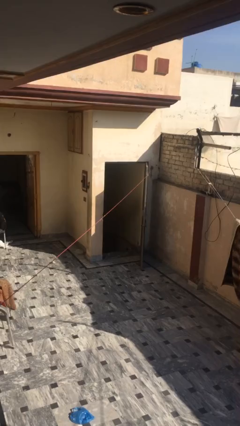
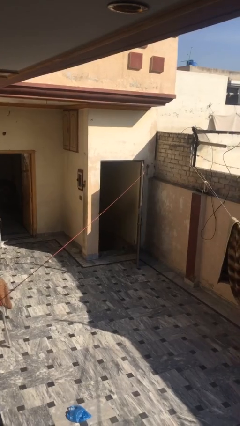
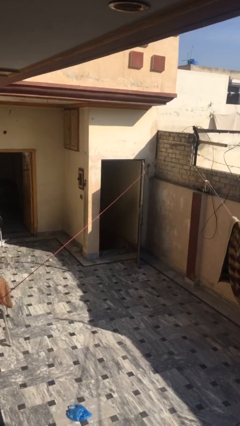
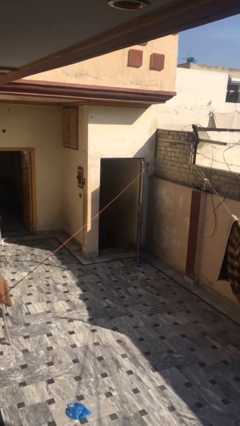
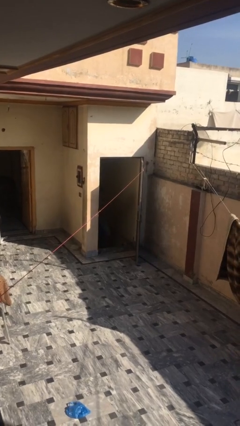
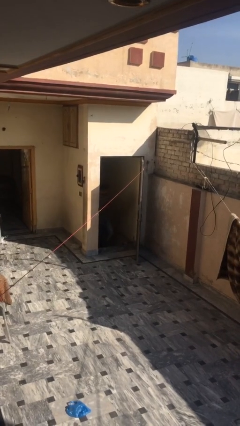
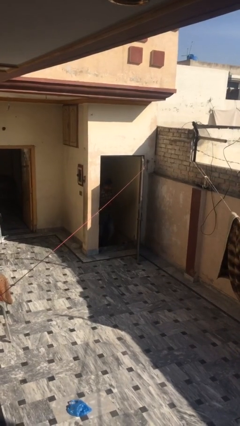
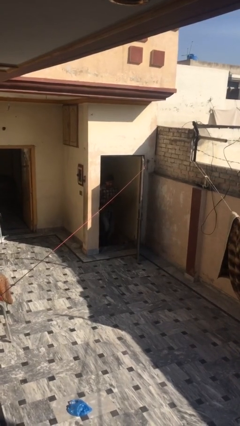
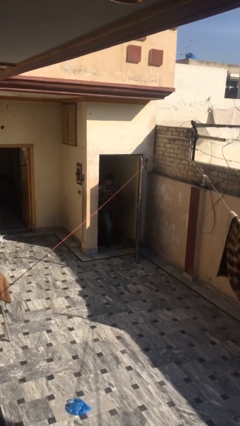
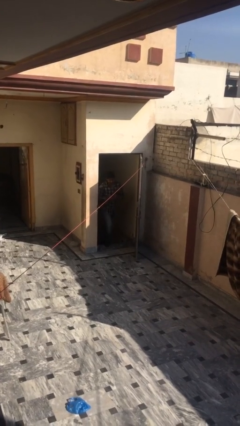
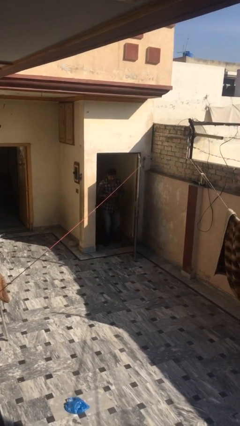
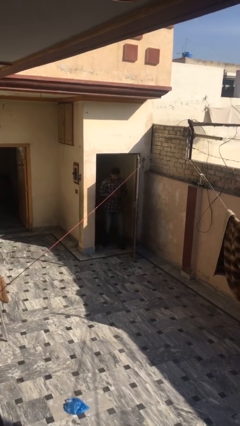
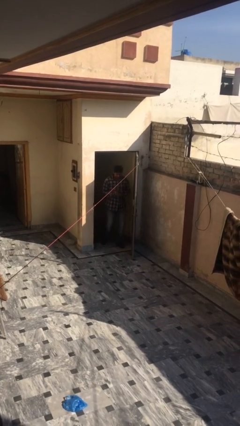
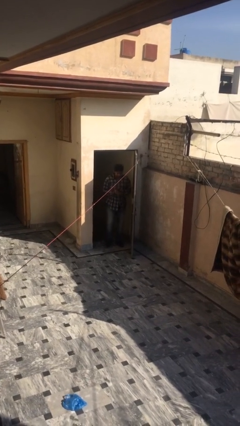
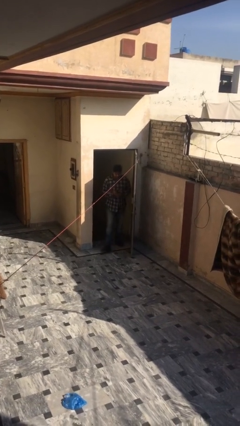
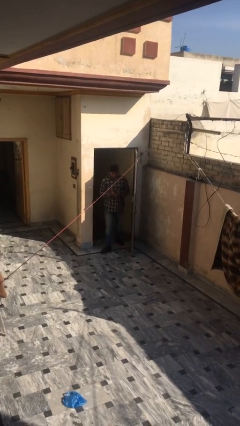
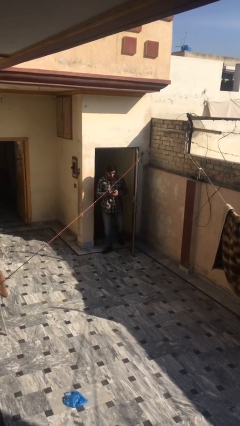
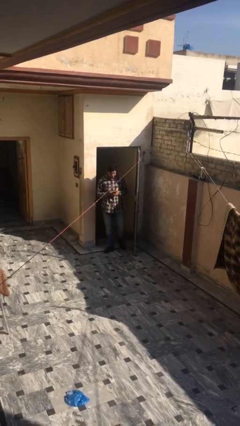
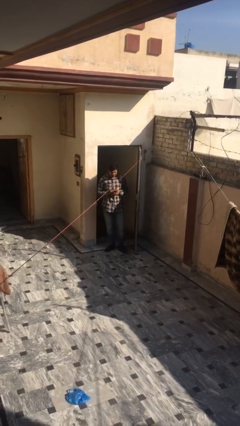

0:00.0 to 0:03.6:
person enters scene through structure

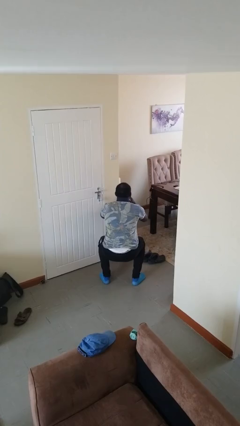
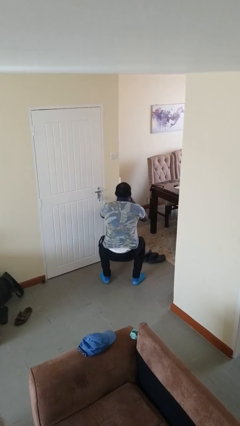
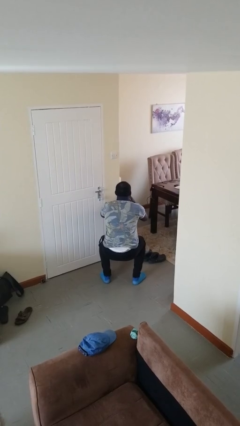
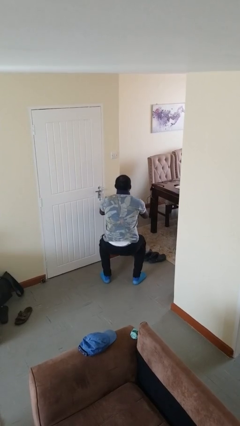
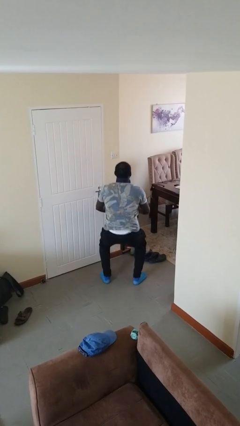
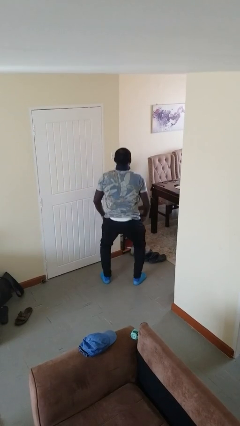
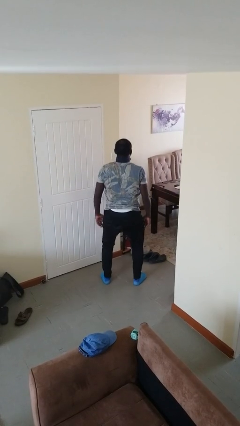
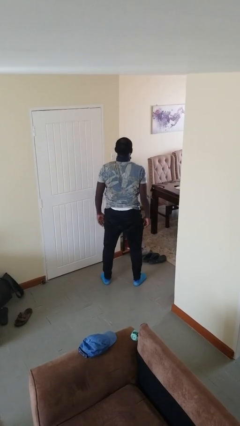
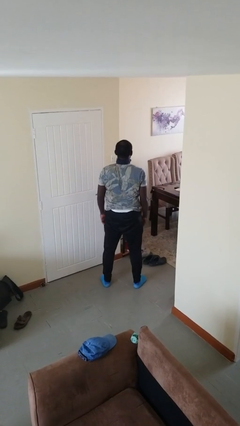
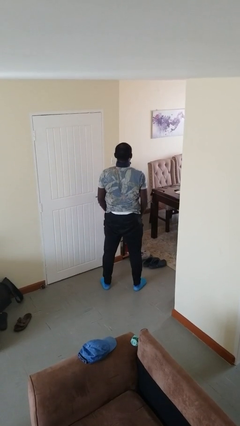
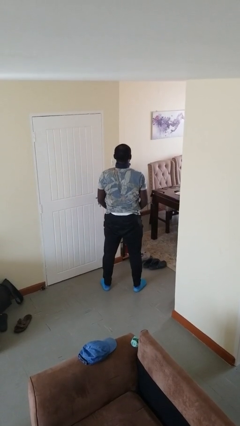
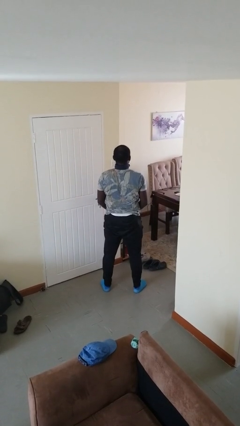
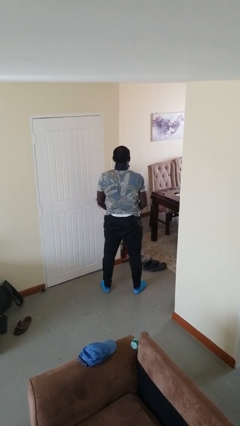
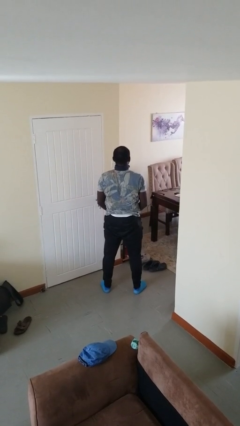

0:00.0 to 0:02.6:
person stands up

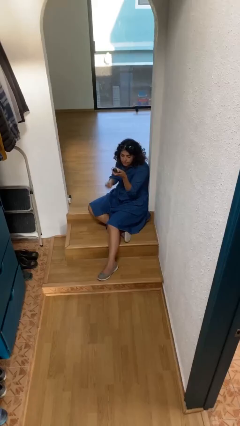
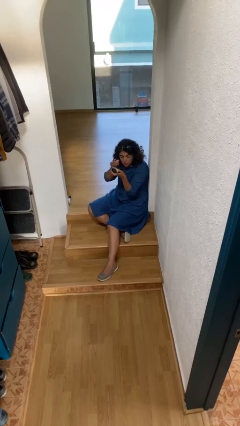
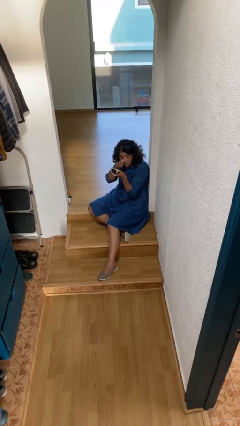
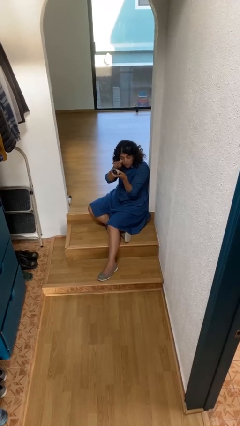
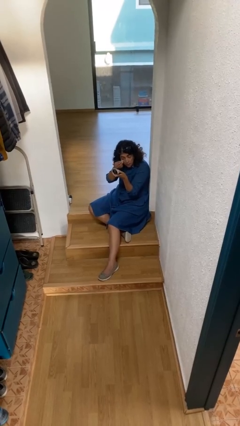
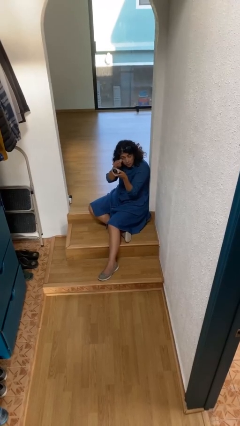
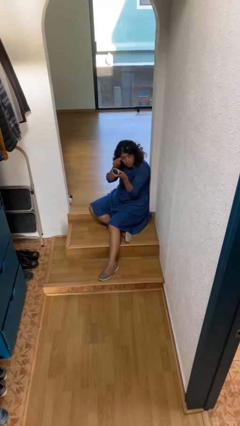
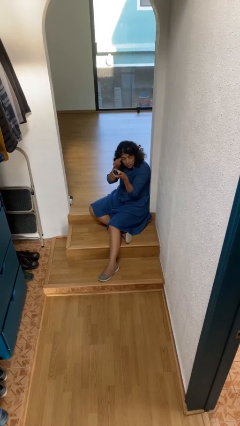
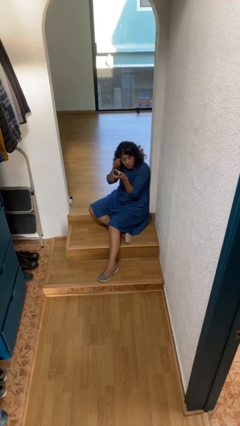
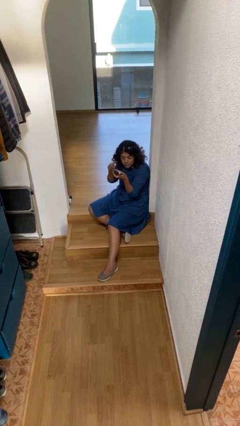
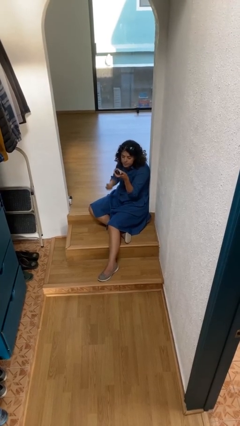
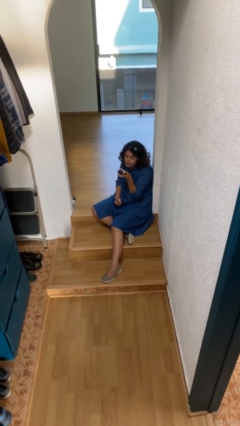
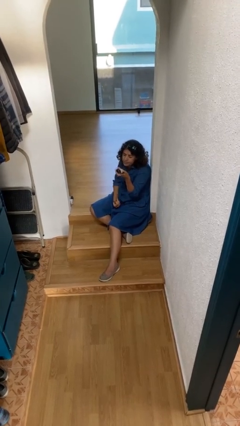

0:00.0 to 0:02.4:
person applies foundation makeup

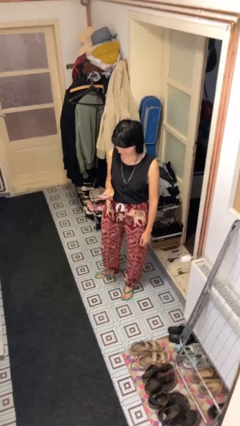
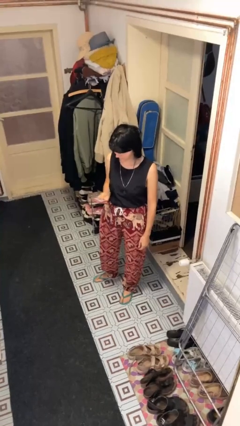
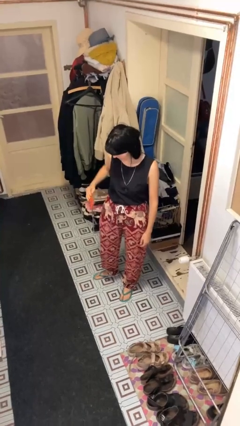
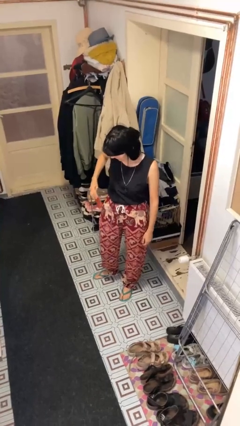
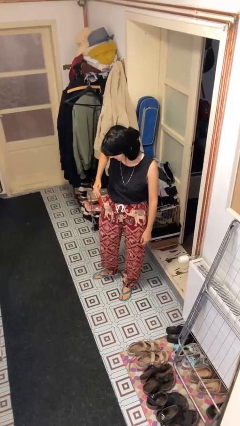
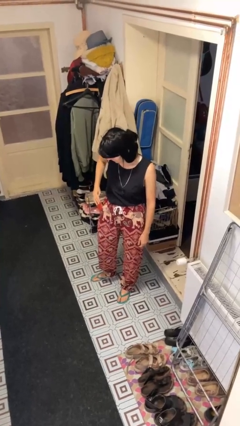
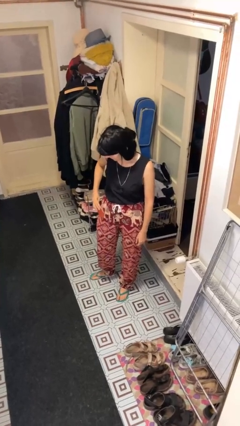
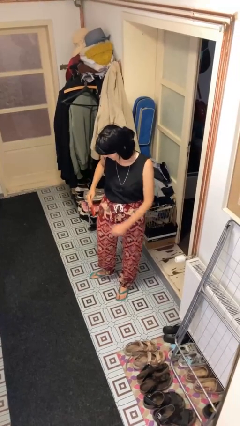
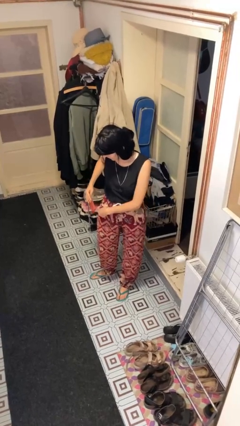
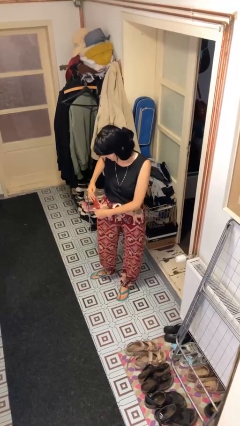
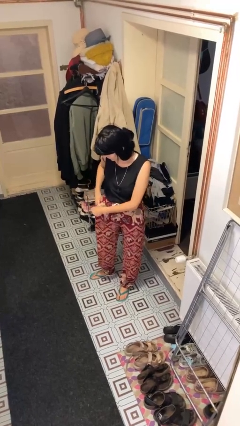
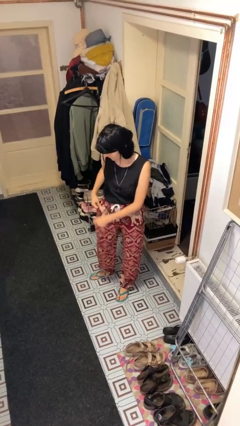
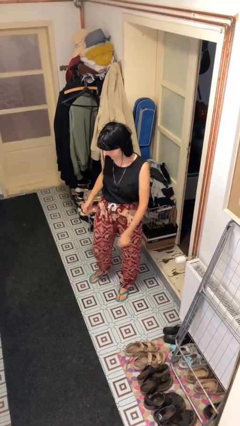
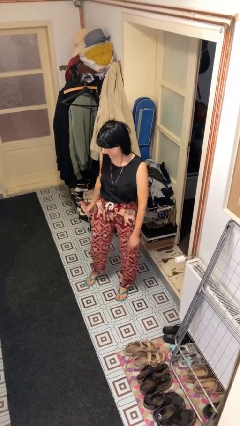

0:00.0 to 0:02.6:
person puts phone into pocket

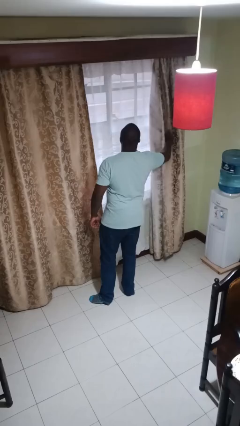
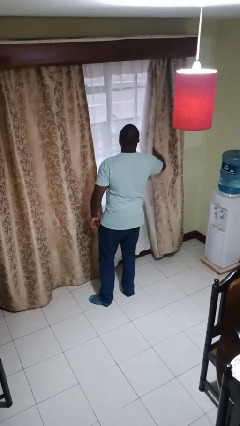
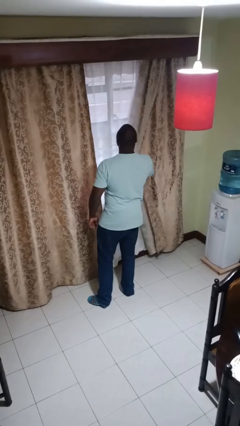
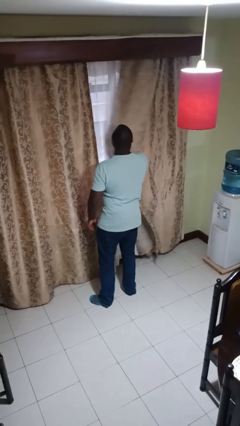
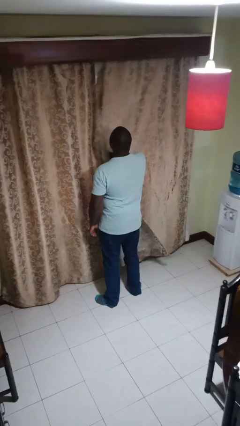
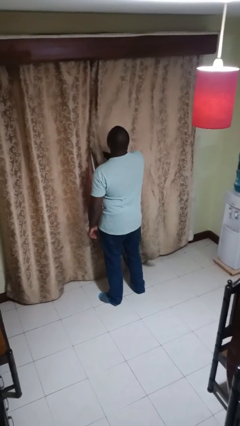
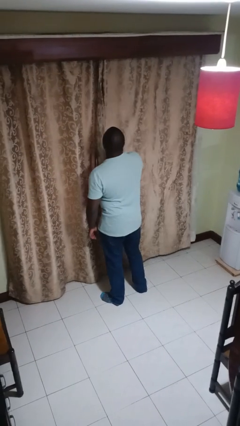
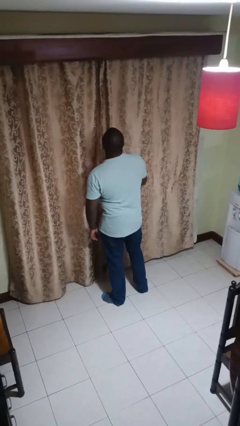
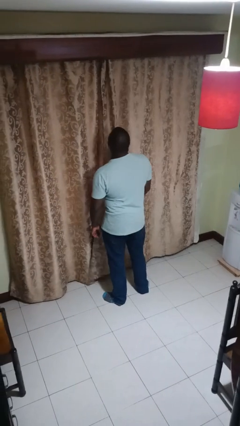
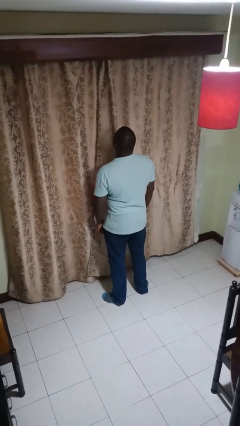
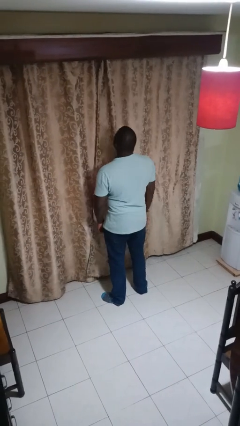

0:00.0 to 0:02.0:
person closes curtains

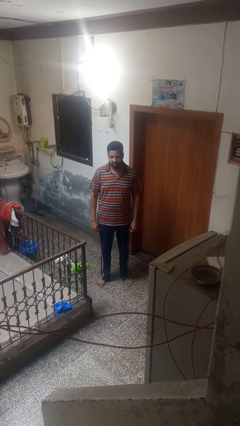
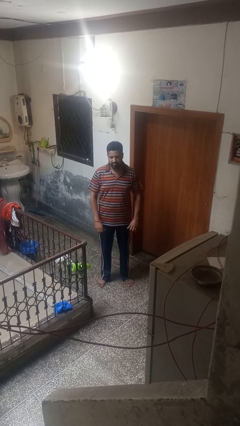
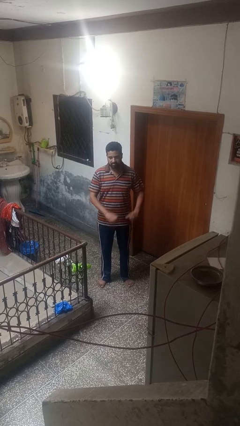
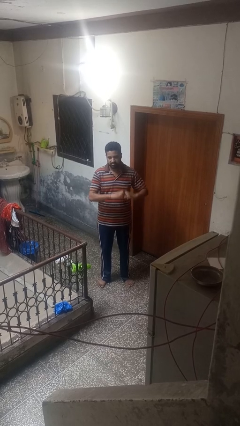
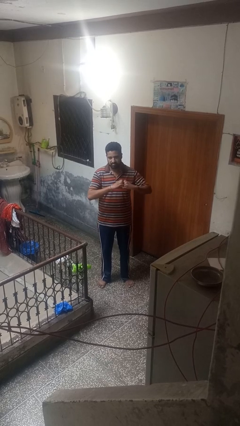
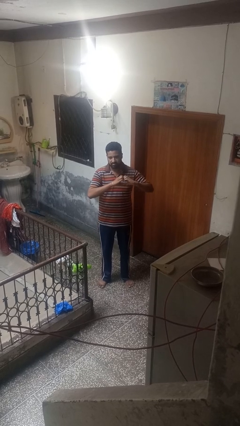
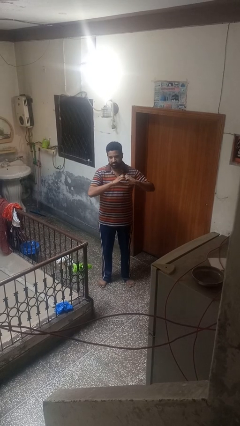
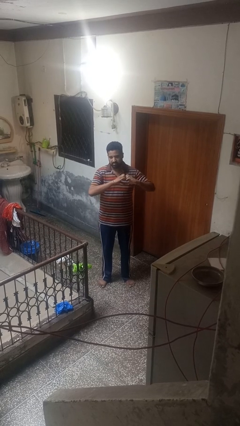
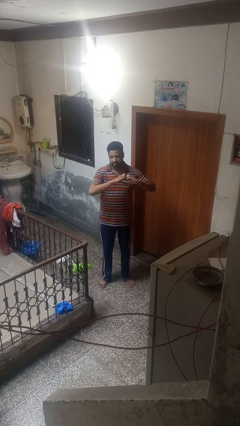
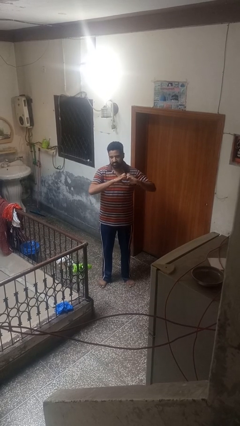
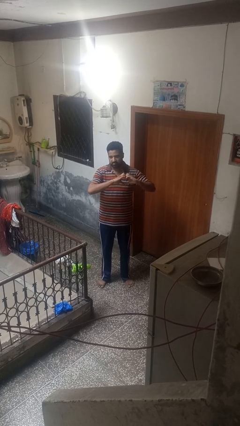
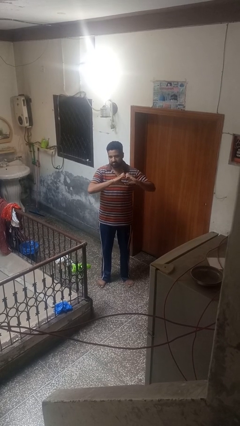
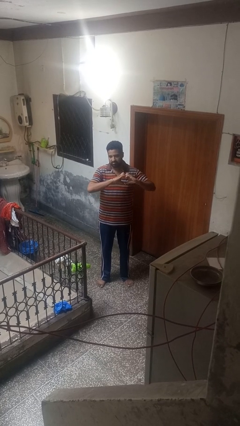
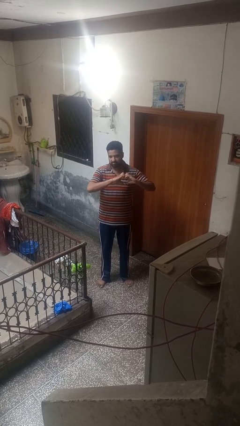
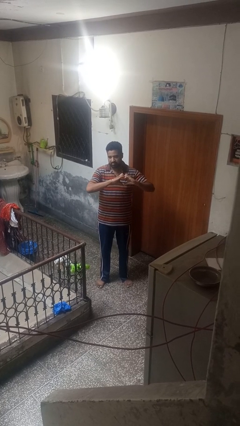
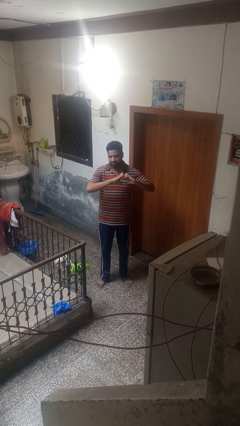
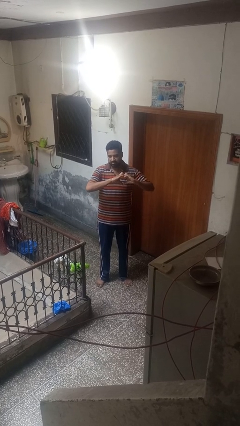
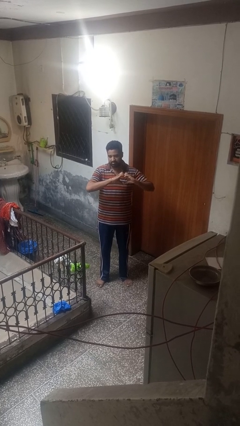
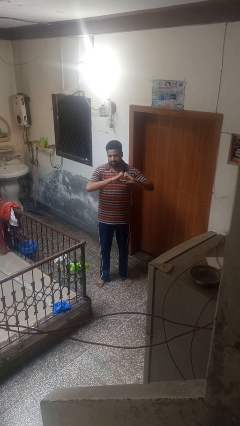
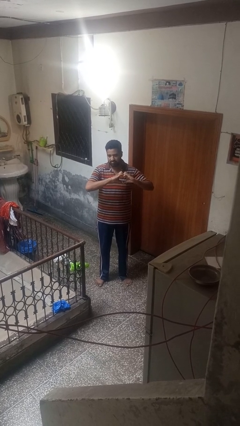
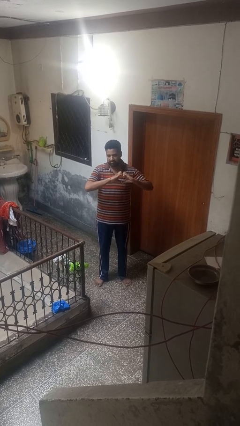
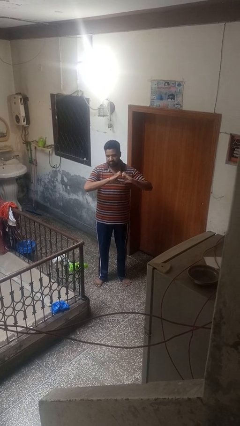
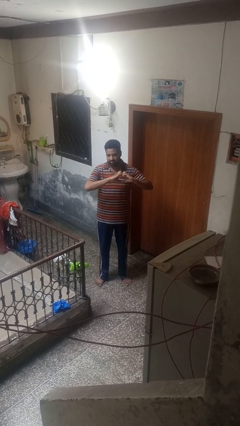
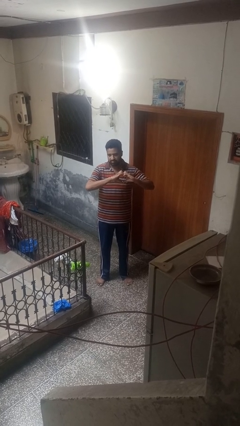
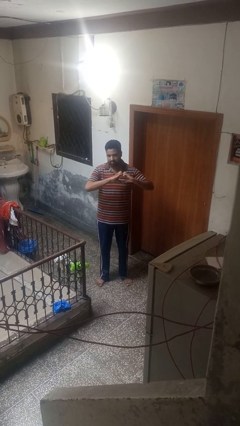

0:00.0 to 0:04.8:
person gestures heart
